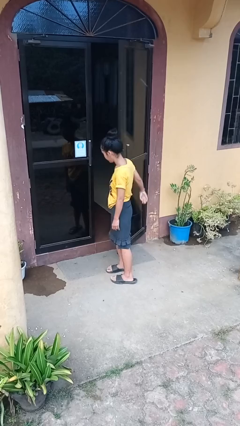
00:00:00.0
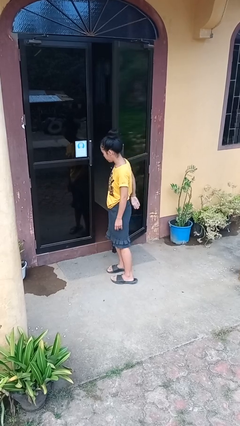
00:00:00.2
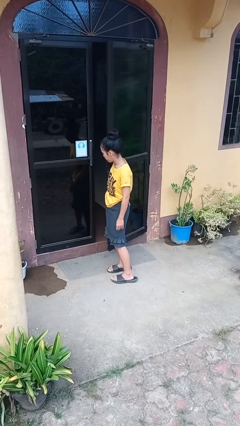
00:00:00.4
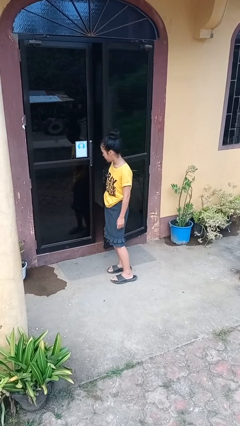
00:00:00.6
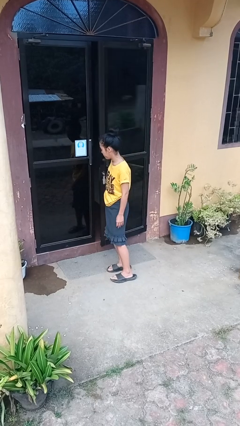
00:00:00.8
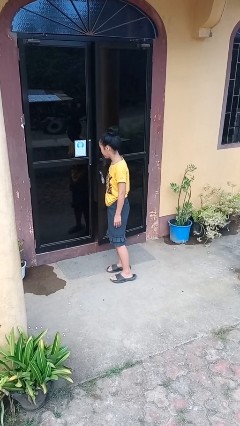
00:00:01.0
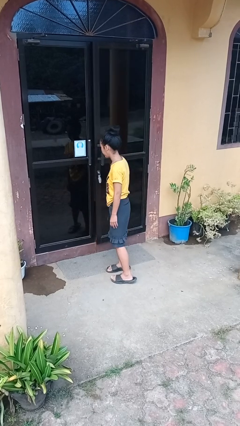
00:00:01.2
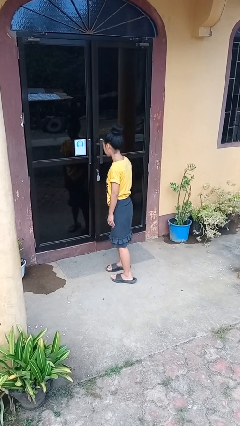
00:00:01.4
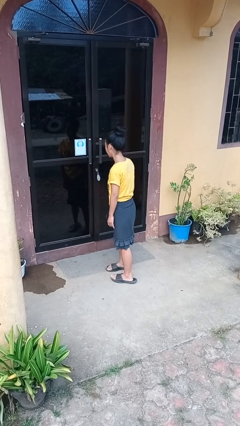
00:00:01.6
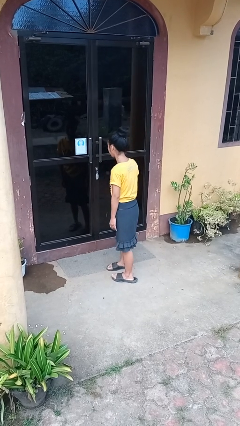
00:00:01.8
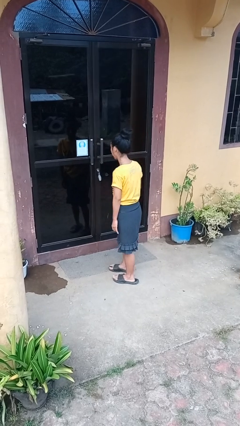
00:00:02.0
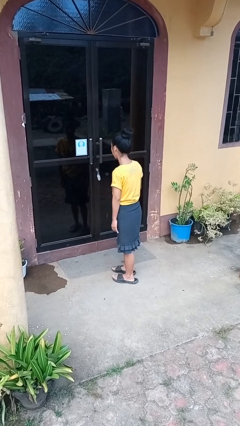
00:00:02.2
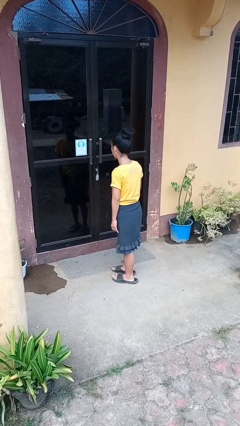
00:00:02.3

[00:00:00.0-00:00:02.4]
person closes door with hip

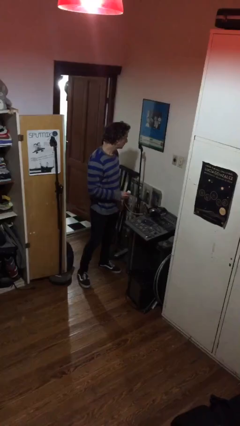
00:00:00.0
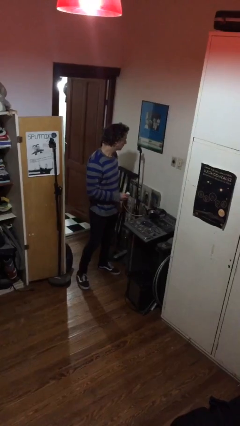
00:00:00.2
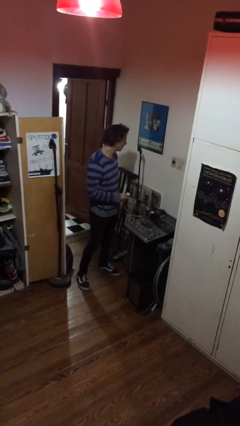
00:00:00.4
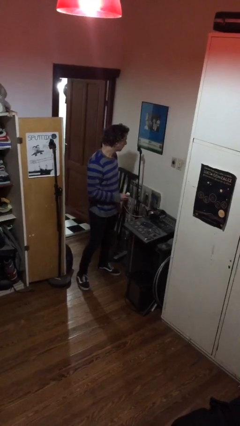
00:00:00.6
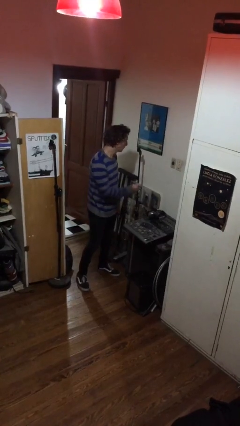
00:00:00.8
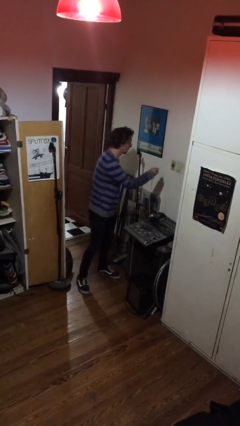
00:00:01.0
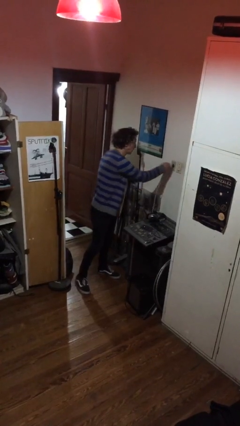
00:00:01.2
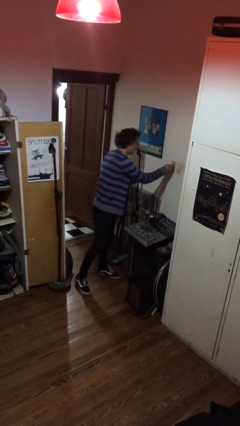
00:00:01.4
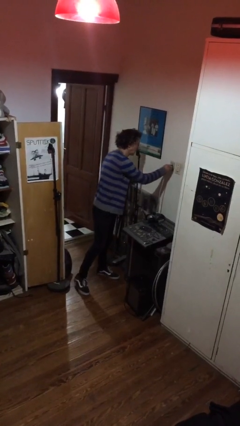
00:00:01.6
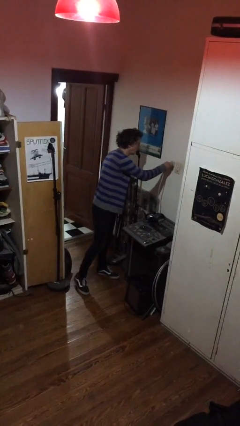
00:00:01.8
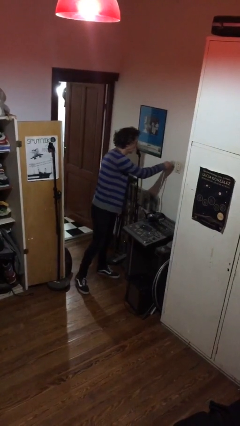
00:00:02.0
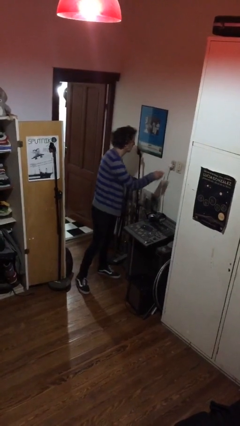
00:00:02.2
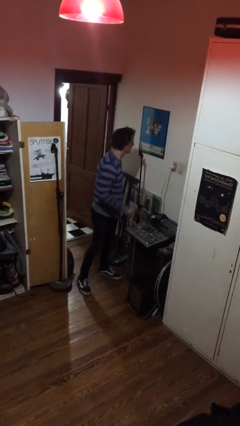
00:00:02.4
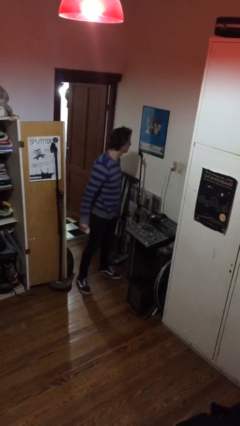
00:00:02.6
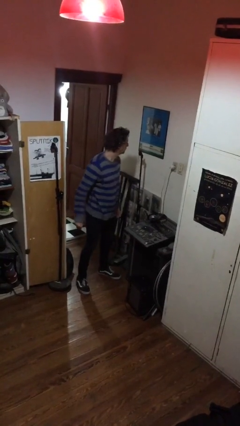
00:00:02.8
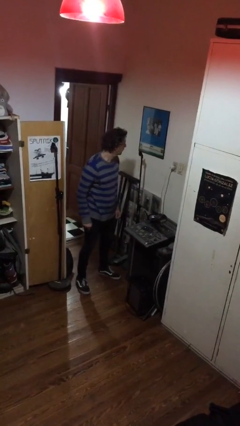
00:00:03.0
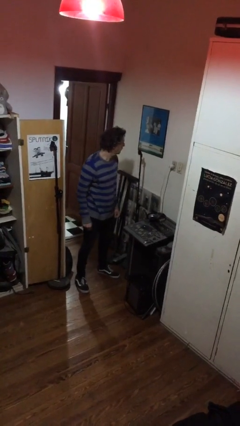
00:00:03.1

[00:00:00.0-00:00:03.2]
person plugs into electrical socket

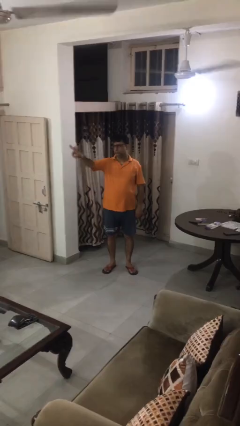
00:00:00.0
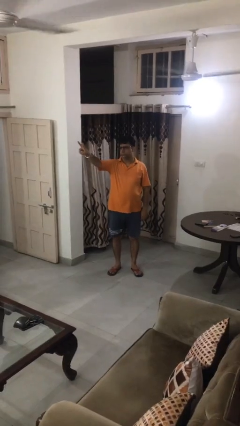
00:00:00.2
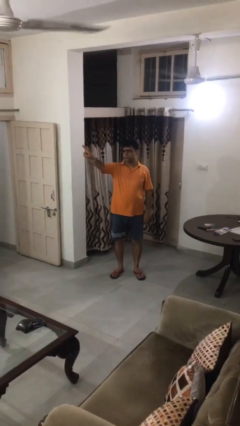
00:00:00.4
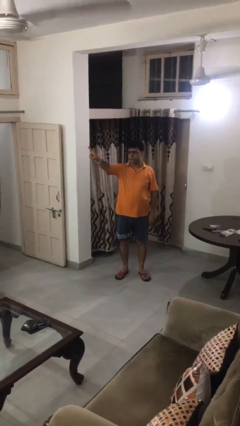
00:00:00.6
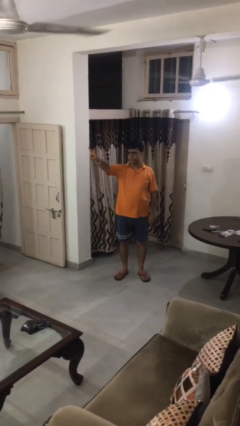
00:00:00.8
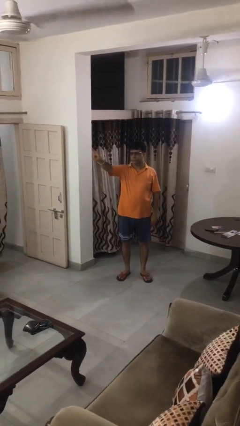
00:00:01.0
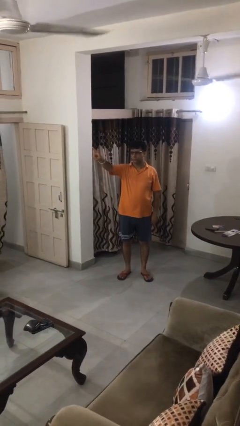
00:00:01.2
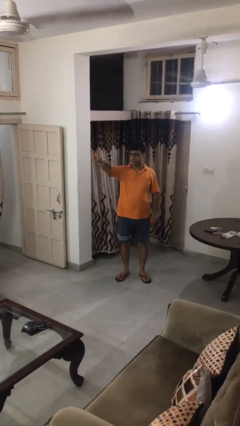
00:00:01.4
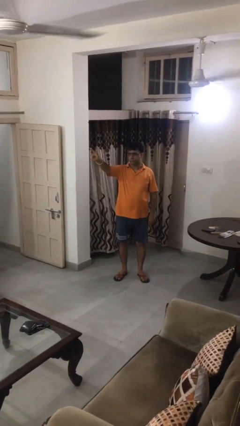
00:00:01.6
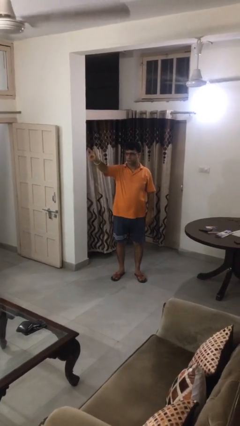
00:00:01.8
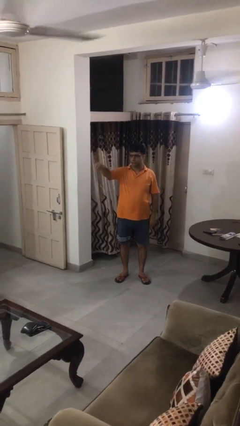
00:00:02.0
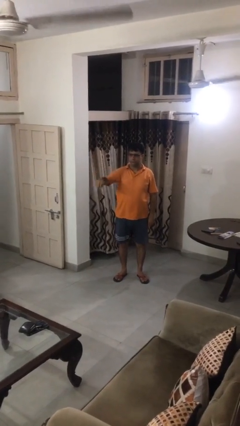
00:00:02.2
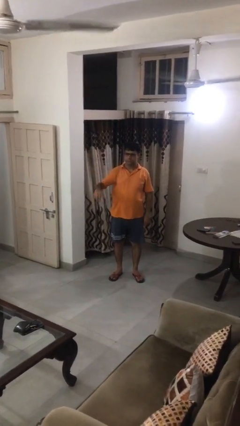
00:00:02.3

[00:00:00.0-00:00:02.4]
person gestures peace

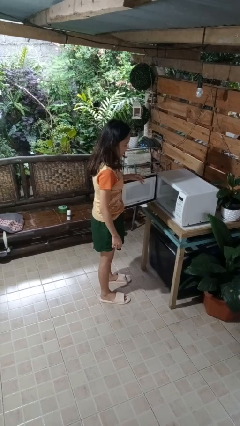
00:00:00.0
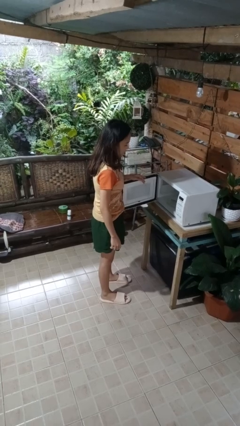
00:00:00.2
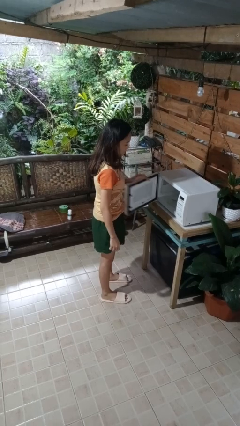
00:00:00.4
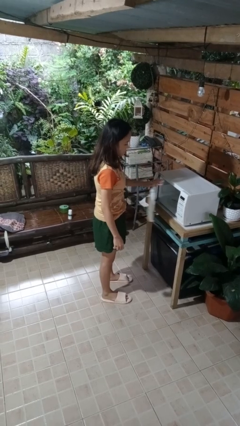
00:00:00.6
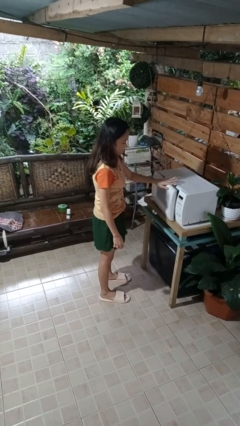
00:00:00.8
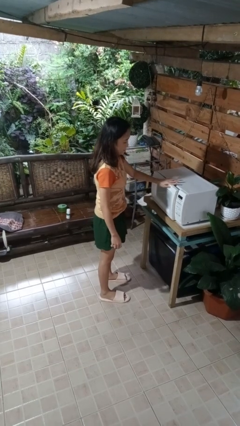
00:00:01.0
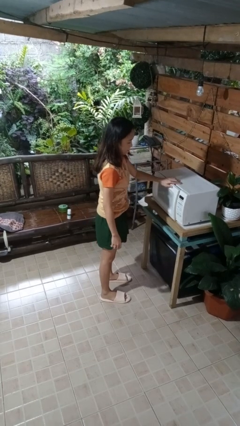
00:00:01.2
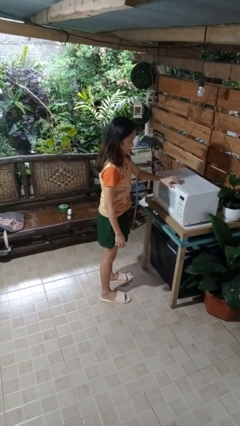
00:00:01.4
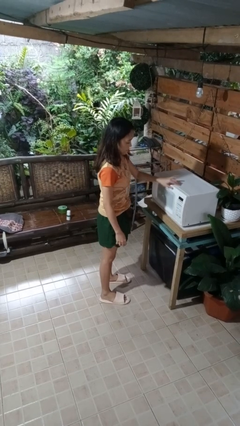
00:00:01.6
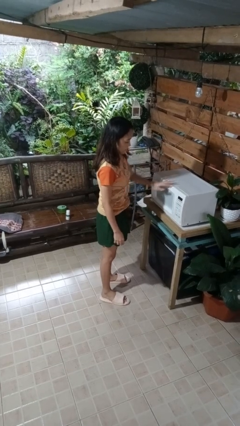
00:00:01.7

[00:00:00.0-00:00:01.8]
person closes microwave

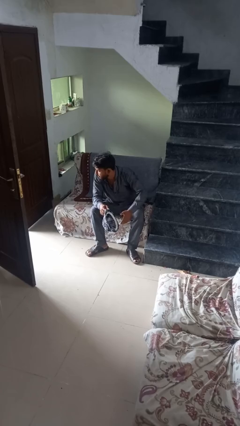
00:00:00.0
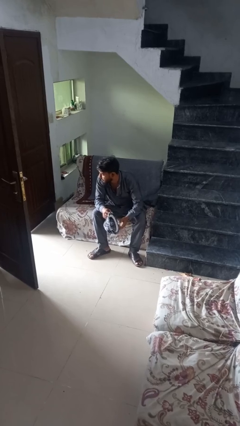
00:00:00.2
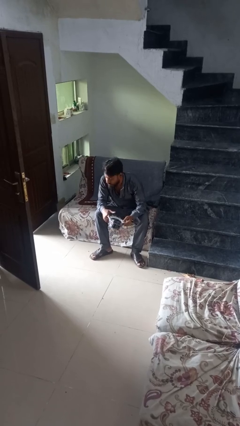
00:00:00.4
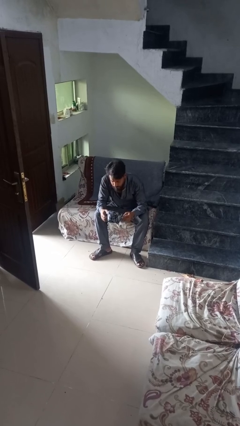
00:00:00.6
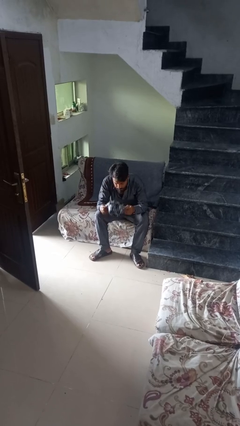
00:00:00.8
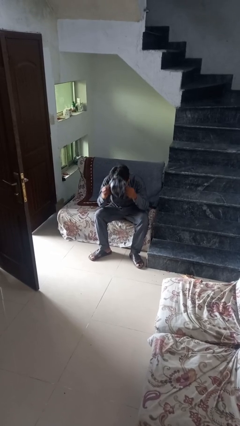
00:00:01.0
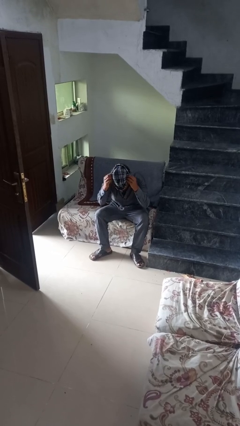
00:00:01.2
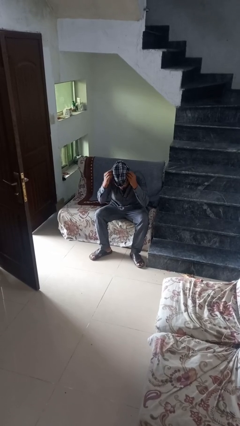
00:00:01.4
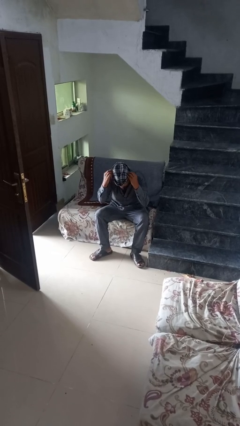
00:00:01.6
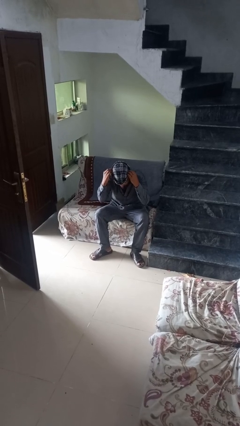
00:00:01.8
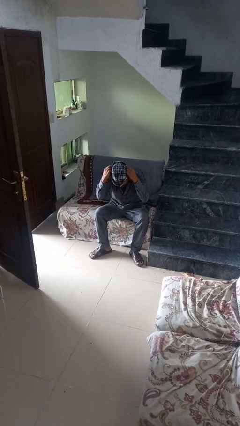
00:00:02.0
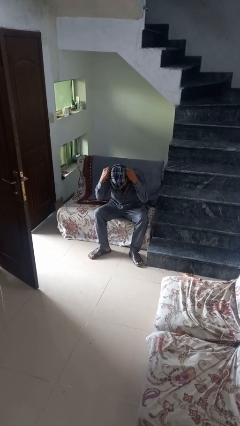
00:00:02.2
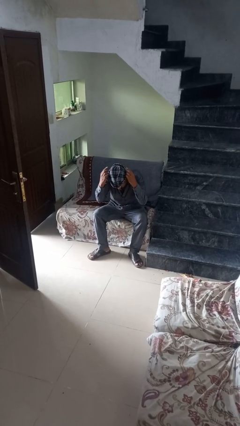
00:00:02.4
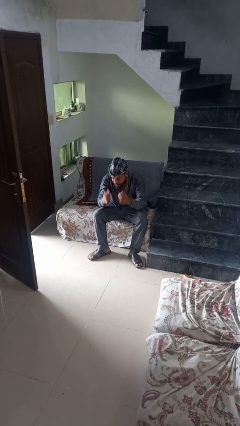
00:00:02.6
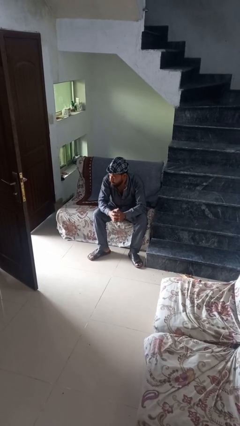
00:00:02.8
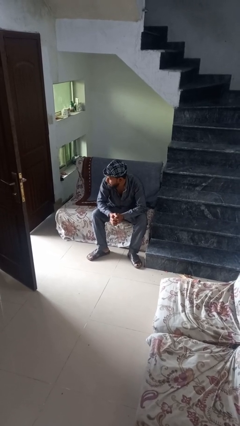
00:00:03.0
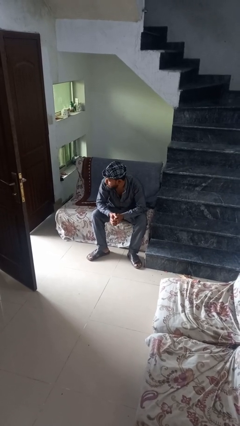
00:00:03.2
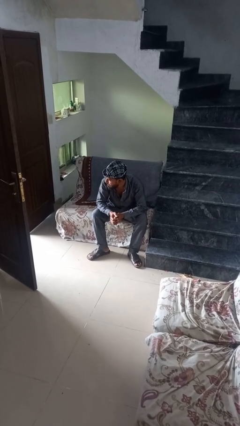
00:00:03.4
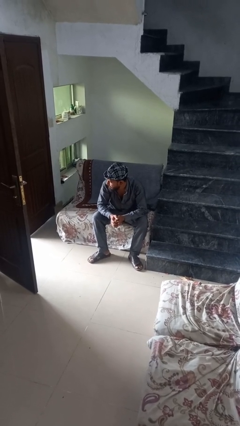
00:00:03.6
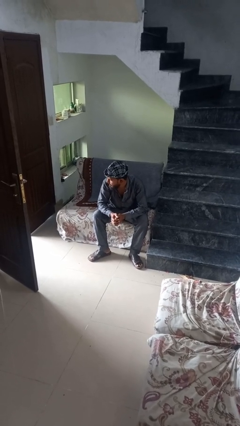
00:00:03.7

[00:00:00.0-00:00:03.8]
person puts on hat

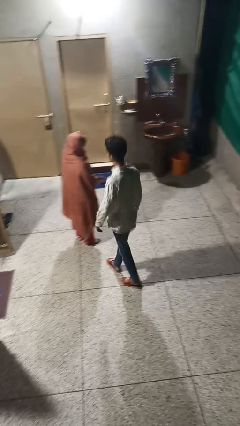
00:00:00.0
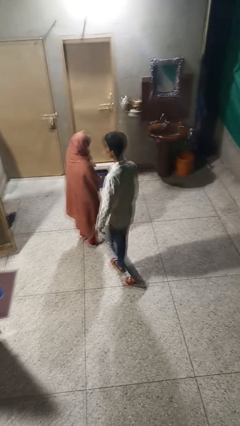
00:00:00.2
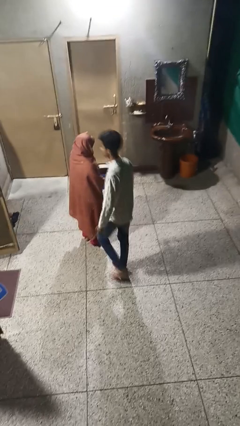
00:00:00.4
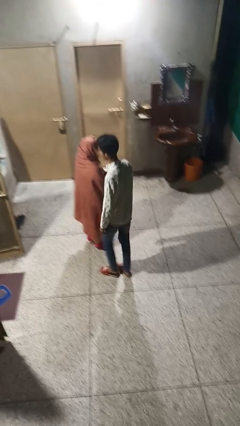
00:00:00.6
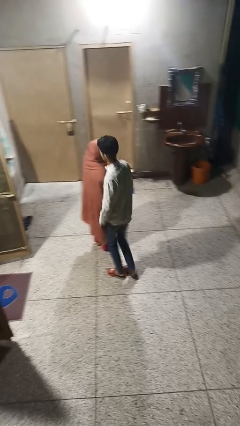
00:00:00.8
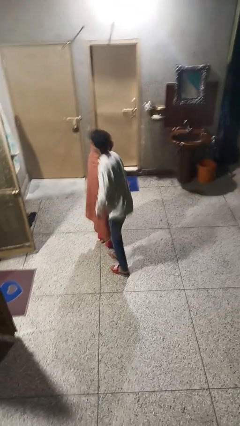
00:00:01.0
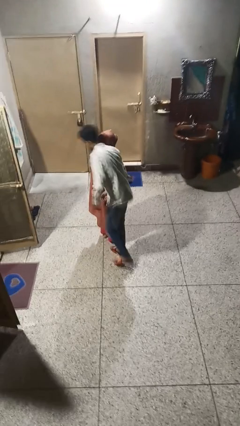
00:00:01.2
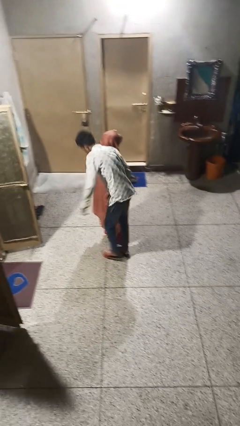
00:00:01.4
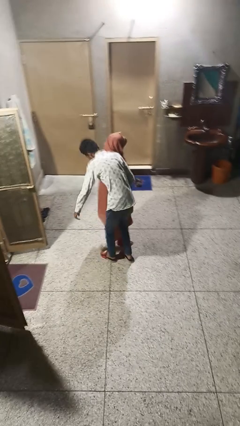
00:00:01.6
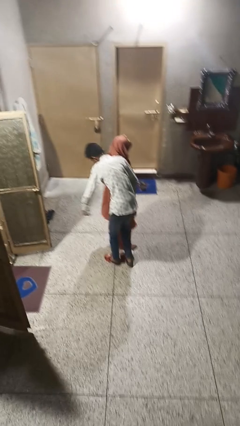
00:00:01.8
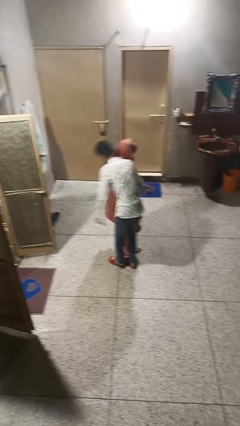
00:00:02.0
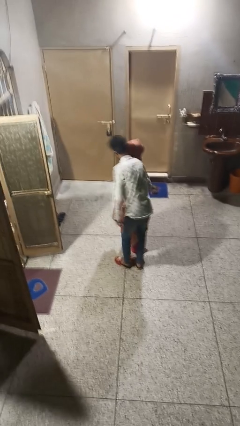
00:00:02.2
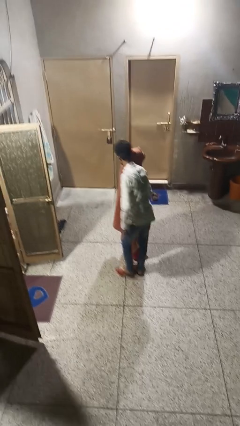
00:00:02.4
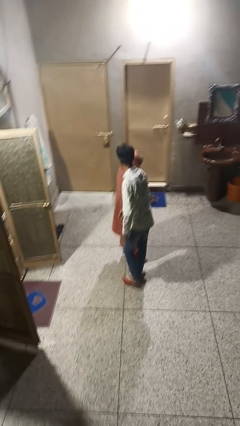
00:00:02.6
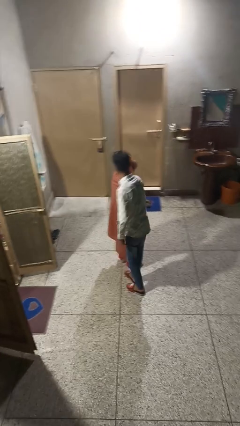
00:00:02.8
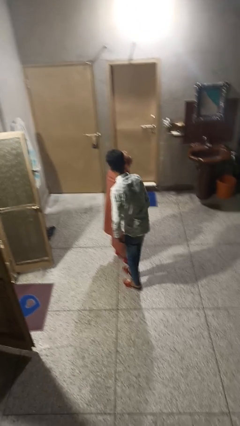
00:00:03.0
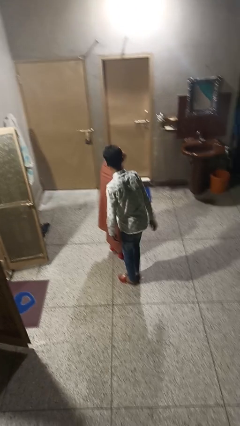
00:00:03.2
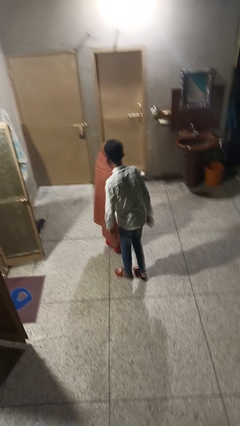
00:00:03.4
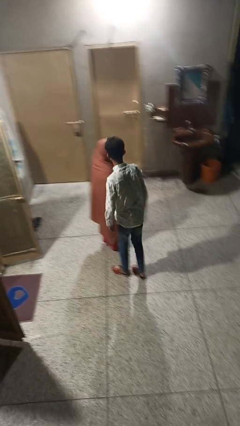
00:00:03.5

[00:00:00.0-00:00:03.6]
person bumps into person
